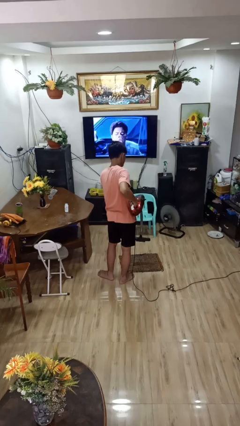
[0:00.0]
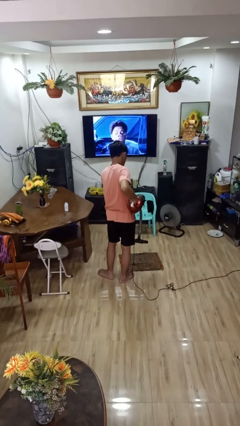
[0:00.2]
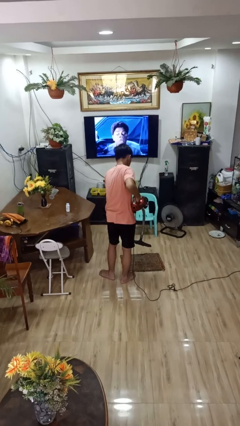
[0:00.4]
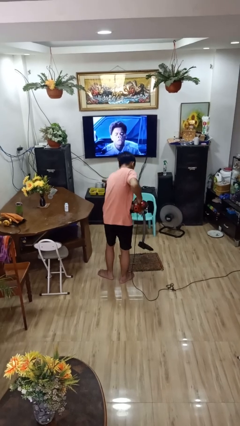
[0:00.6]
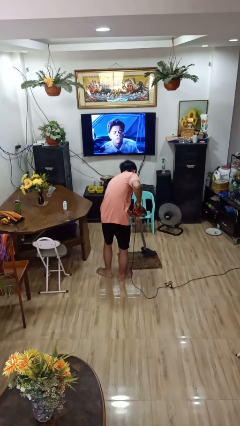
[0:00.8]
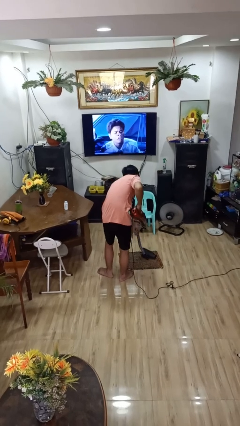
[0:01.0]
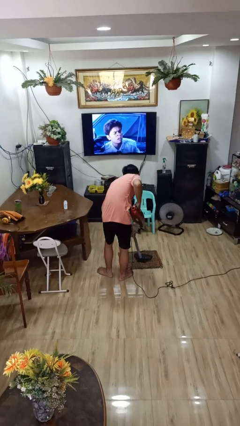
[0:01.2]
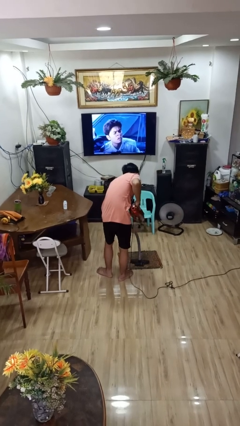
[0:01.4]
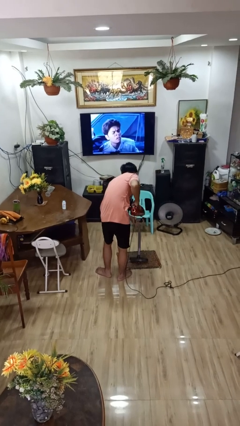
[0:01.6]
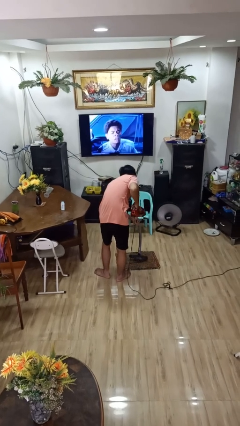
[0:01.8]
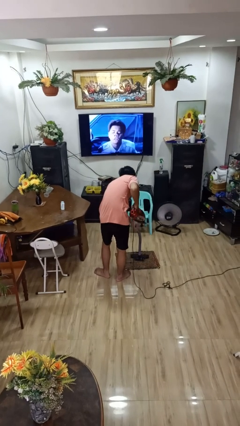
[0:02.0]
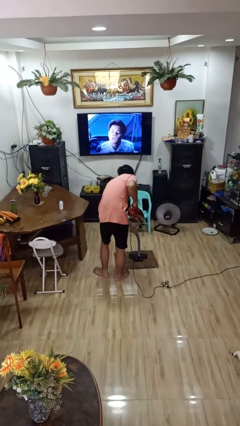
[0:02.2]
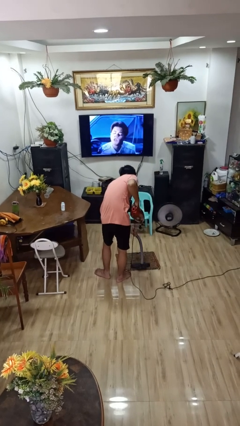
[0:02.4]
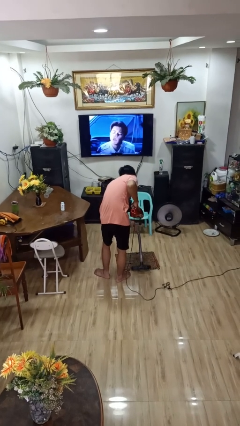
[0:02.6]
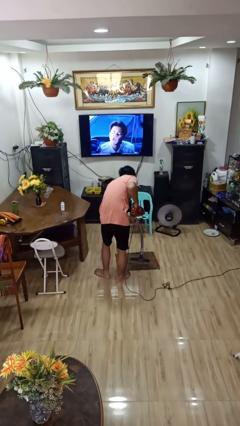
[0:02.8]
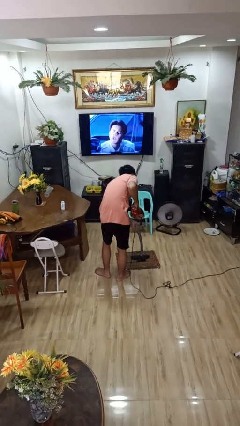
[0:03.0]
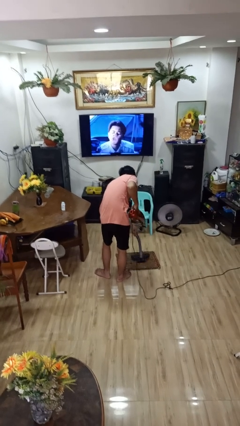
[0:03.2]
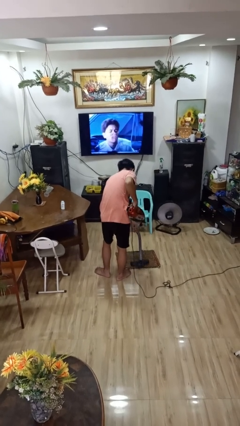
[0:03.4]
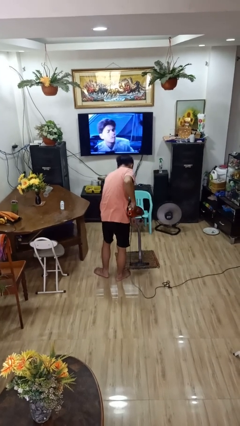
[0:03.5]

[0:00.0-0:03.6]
person vacuums carpet

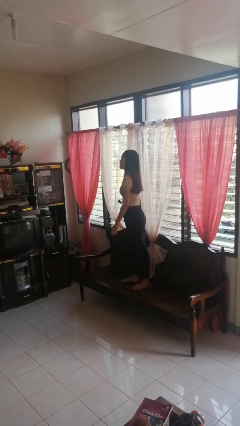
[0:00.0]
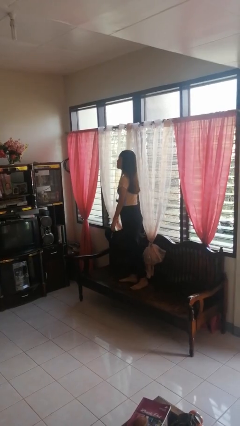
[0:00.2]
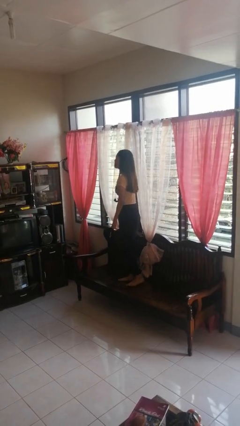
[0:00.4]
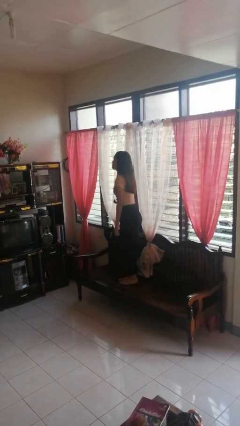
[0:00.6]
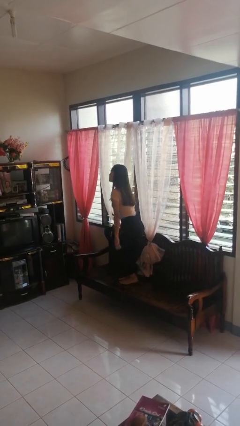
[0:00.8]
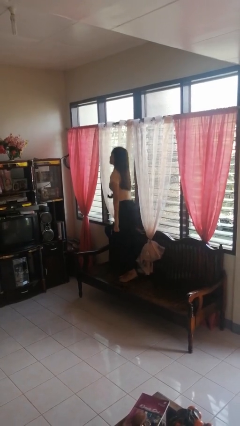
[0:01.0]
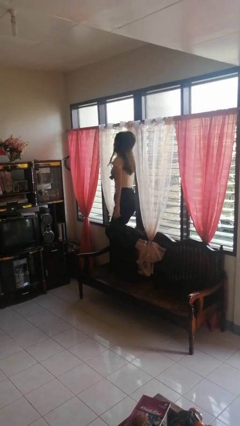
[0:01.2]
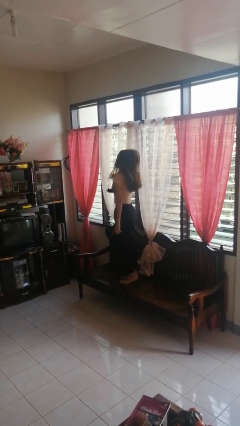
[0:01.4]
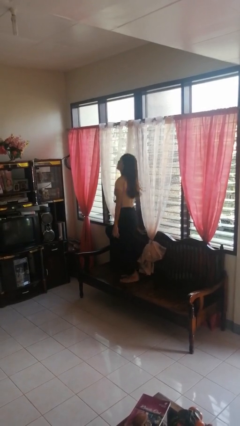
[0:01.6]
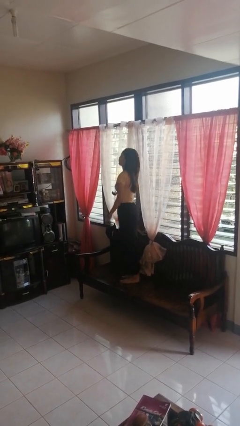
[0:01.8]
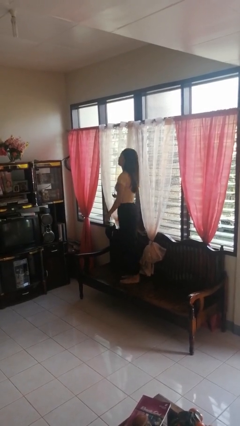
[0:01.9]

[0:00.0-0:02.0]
person jumps on couch

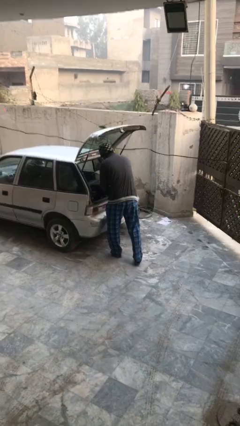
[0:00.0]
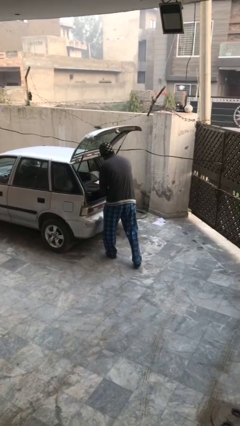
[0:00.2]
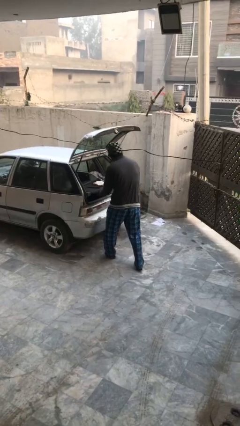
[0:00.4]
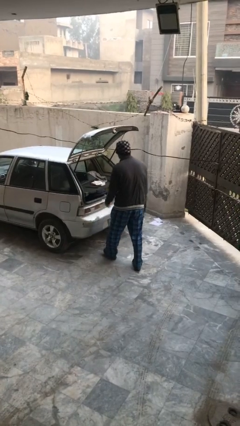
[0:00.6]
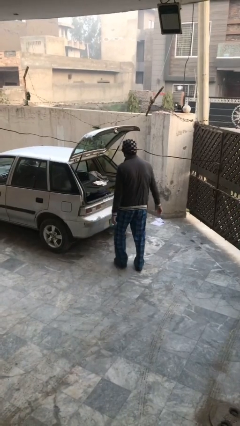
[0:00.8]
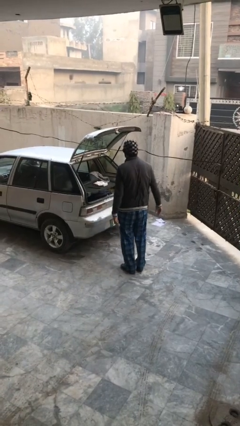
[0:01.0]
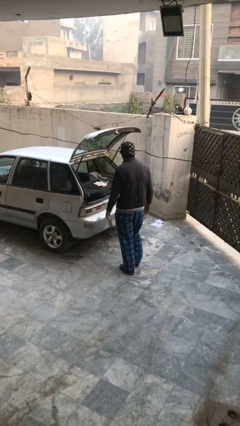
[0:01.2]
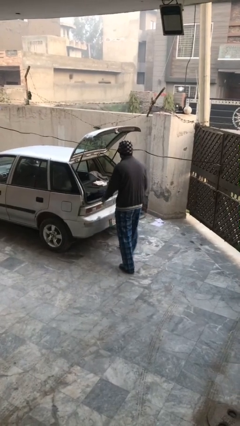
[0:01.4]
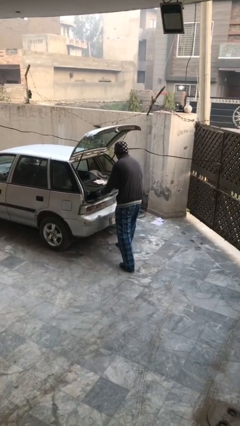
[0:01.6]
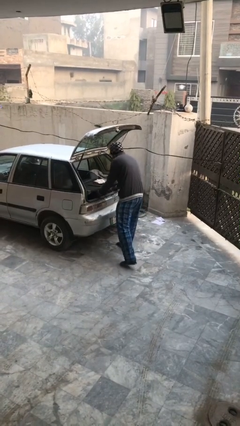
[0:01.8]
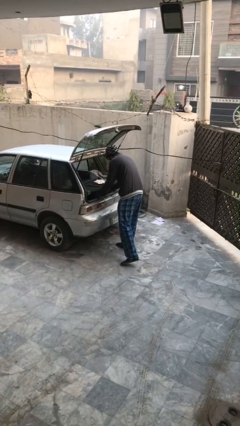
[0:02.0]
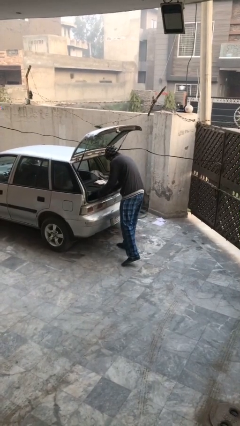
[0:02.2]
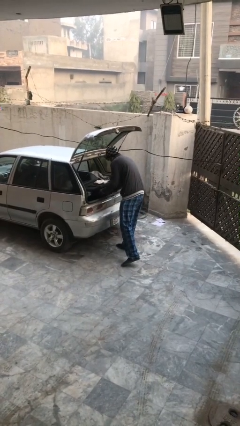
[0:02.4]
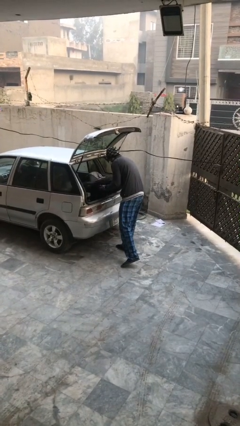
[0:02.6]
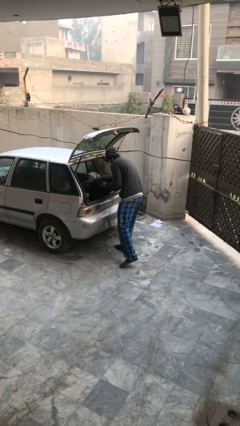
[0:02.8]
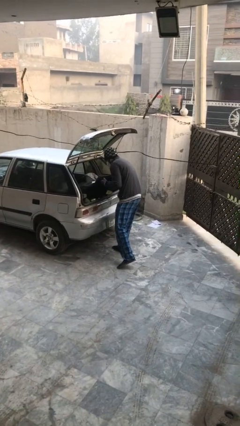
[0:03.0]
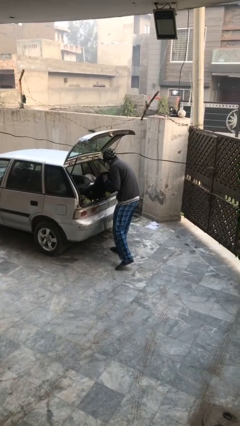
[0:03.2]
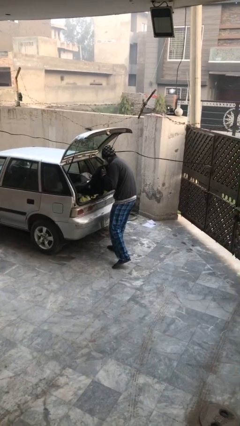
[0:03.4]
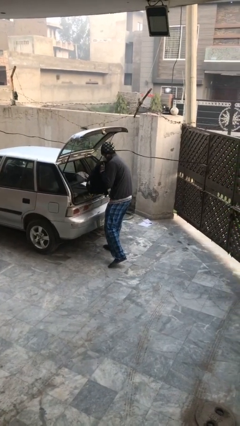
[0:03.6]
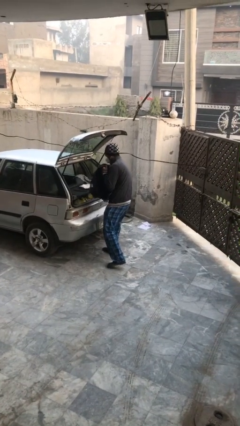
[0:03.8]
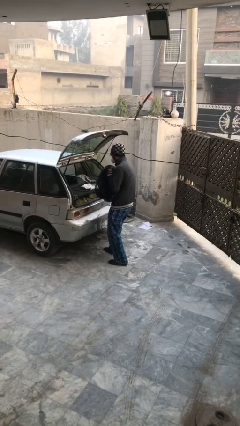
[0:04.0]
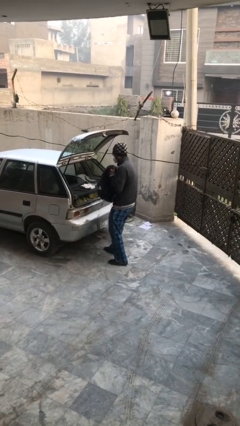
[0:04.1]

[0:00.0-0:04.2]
person unloads car

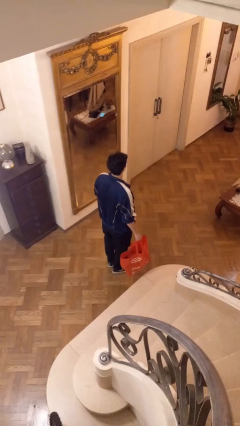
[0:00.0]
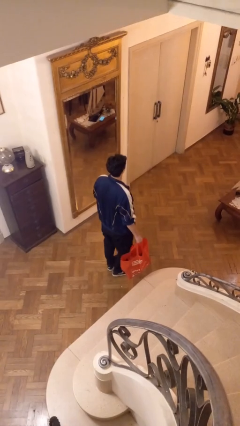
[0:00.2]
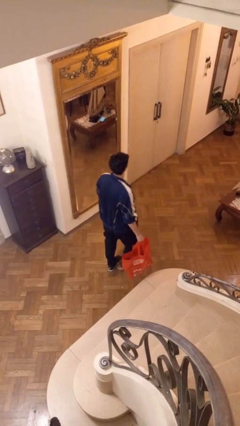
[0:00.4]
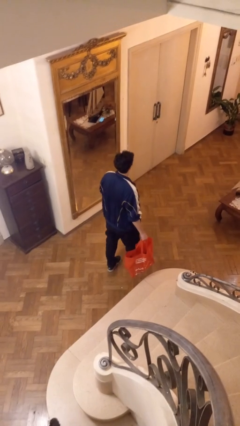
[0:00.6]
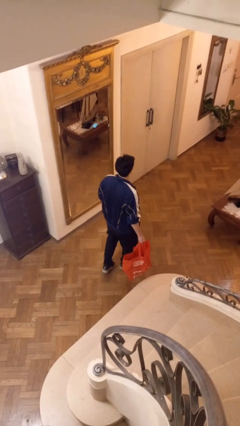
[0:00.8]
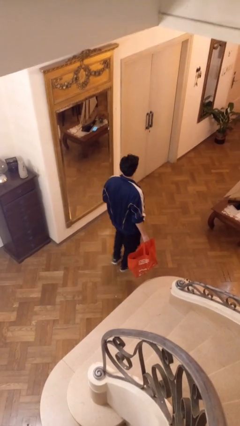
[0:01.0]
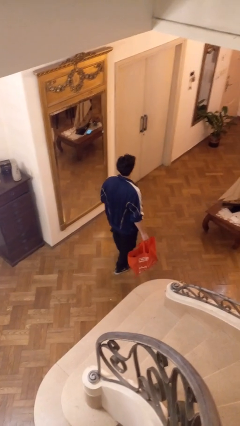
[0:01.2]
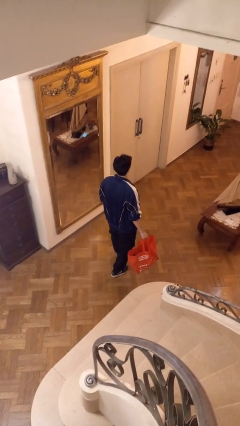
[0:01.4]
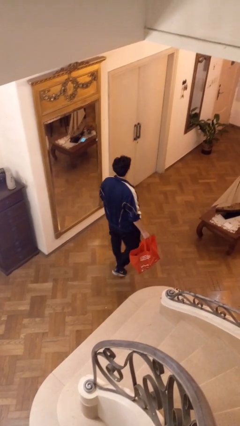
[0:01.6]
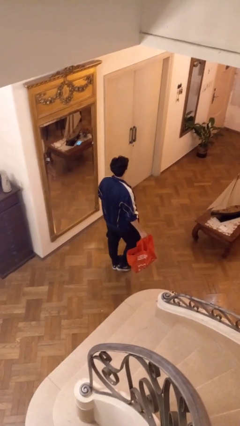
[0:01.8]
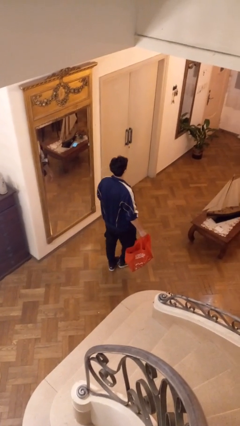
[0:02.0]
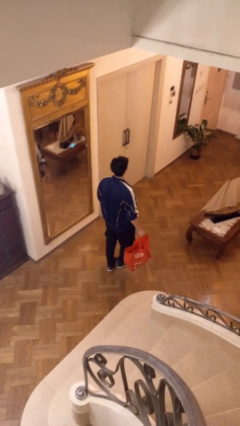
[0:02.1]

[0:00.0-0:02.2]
person carries groceries

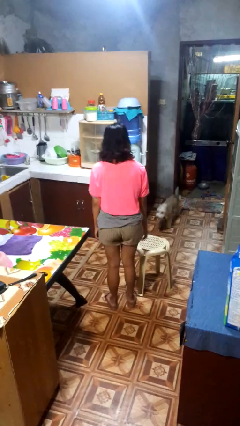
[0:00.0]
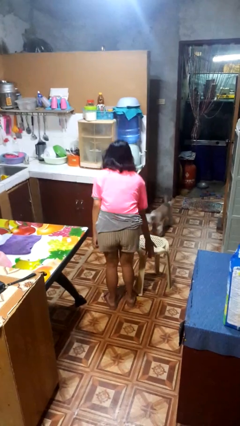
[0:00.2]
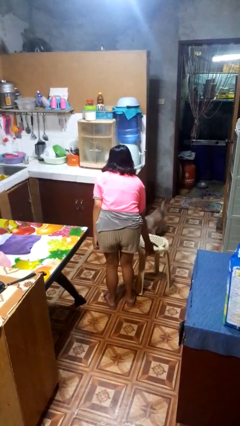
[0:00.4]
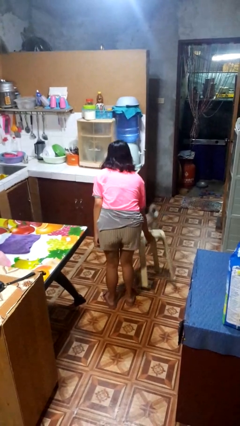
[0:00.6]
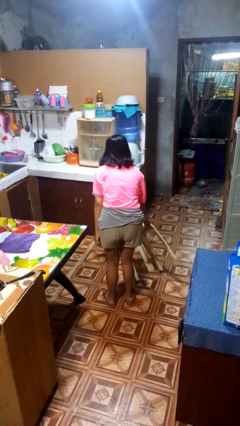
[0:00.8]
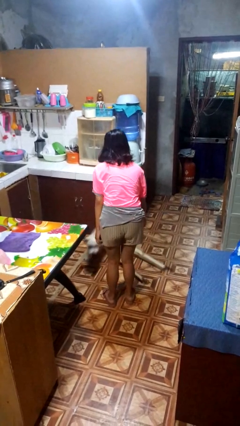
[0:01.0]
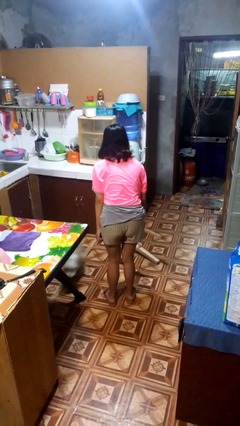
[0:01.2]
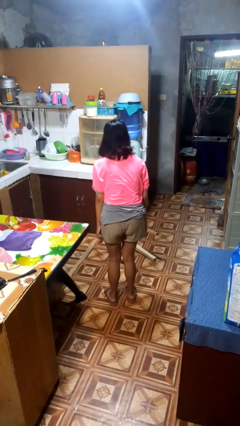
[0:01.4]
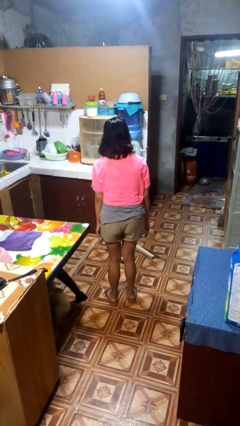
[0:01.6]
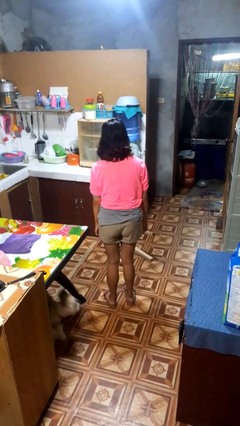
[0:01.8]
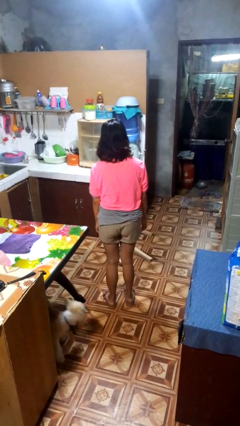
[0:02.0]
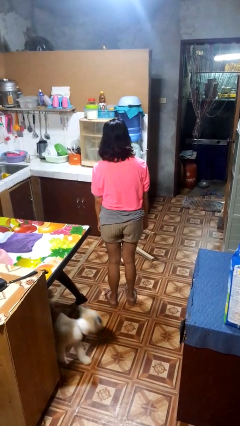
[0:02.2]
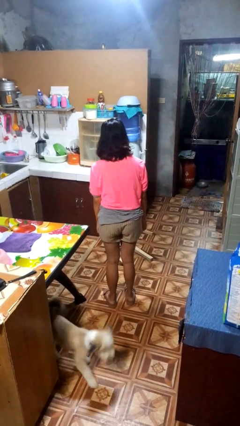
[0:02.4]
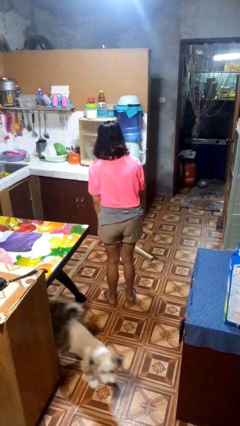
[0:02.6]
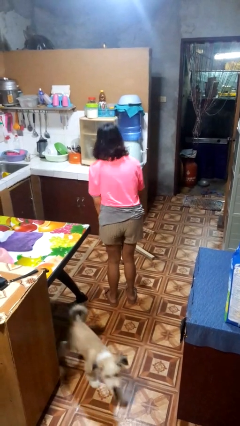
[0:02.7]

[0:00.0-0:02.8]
person knocks over furniture

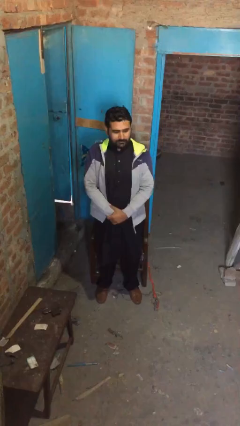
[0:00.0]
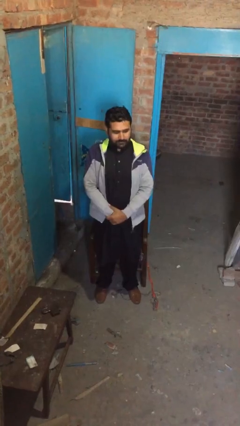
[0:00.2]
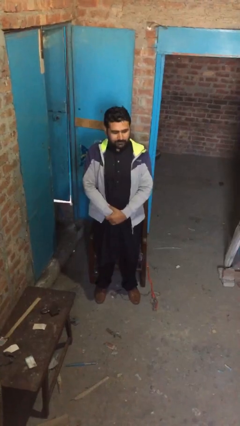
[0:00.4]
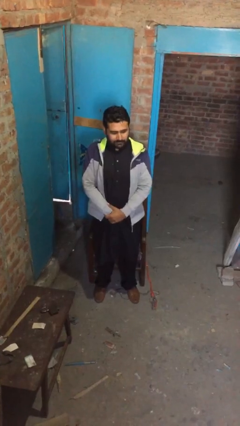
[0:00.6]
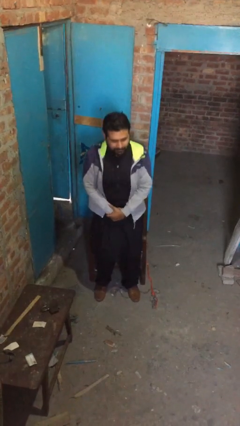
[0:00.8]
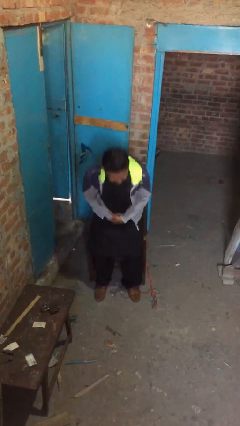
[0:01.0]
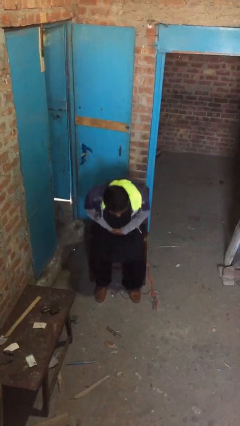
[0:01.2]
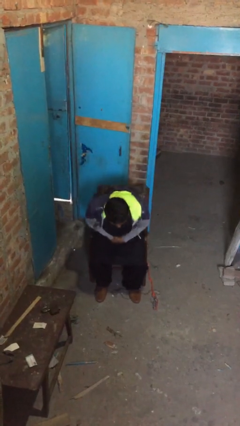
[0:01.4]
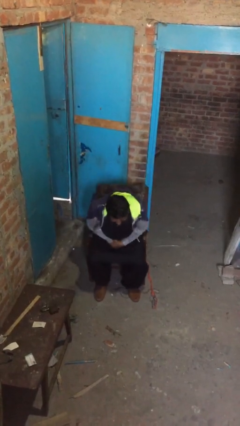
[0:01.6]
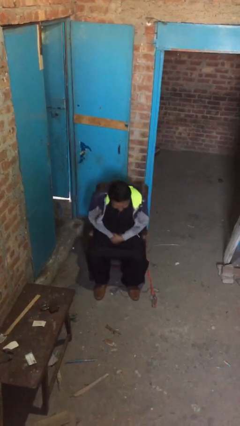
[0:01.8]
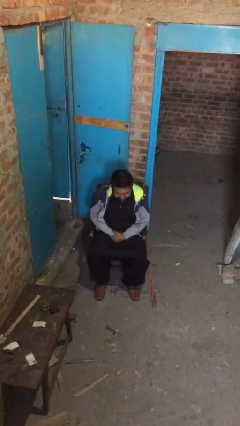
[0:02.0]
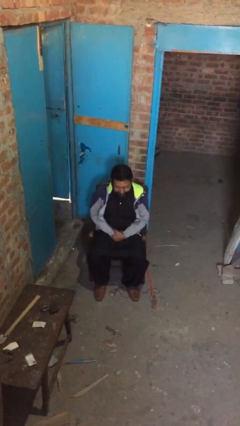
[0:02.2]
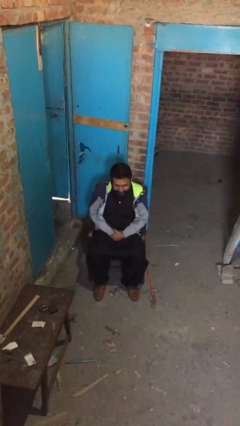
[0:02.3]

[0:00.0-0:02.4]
person sits down

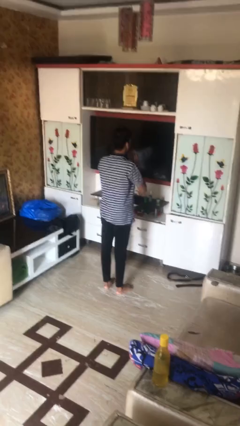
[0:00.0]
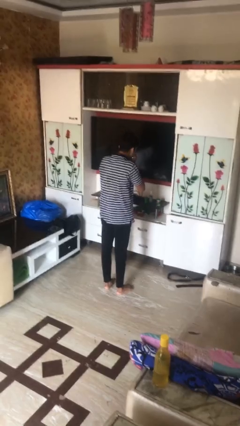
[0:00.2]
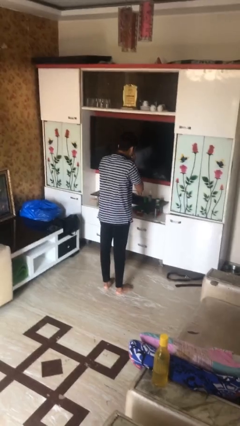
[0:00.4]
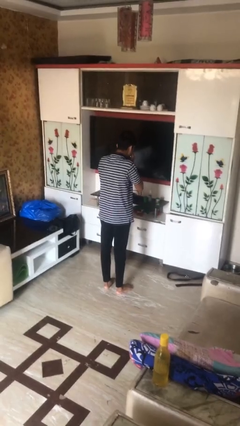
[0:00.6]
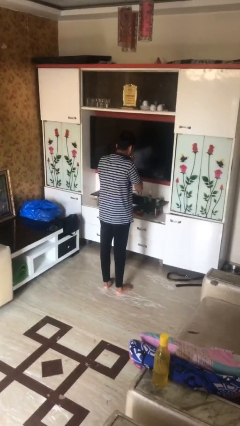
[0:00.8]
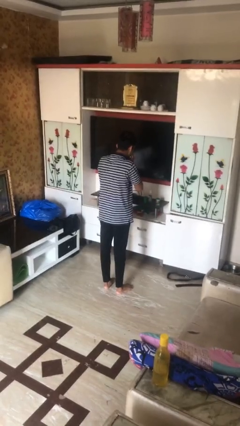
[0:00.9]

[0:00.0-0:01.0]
person sneezes into hand
